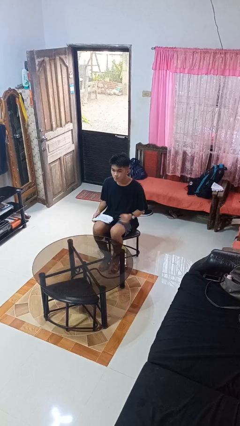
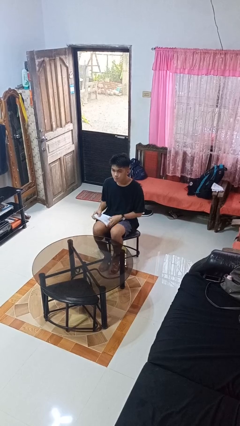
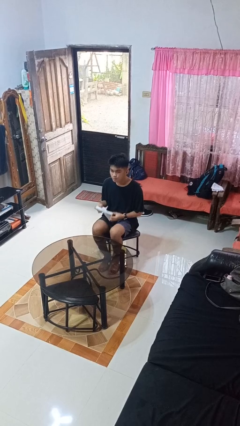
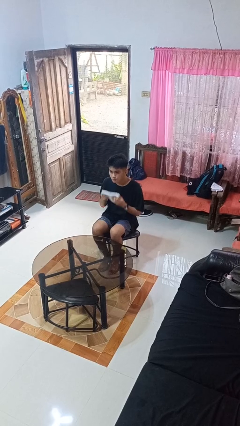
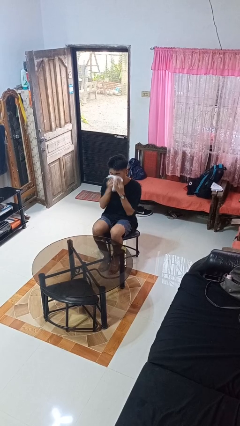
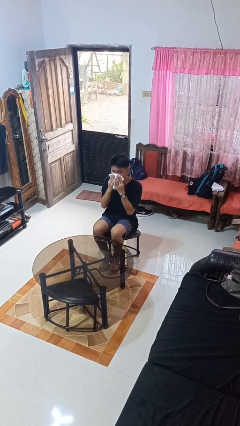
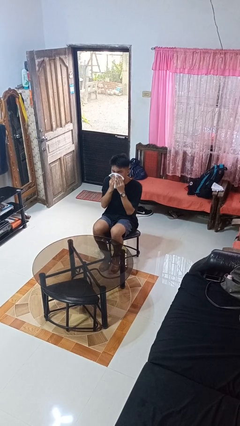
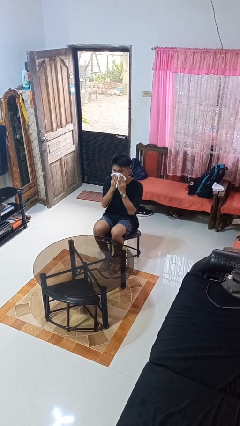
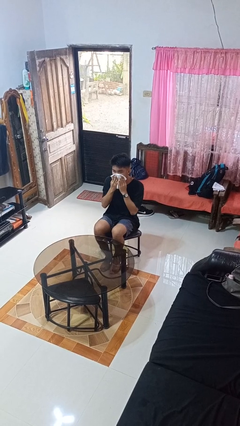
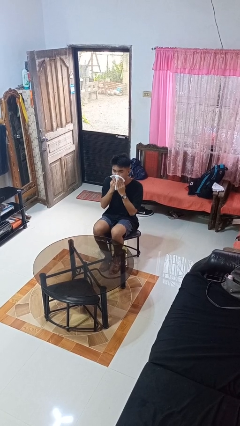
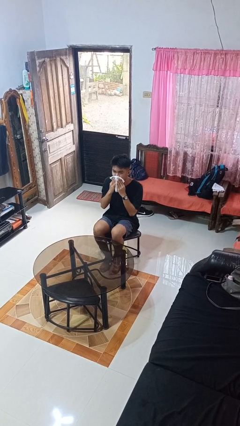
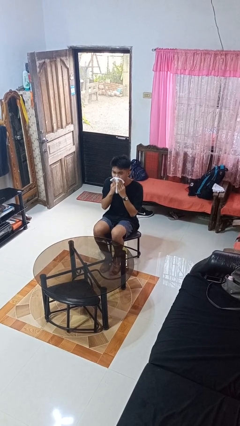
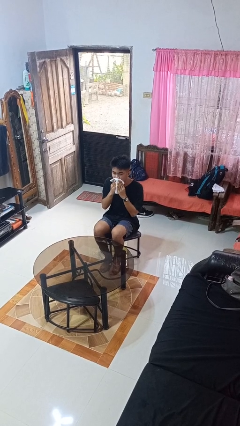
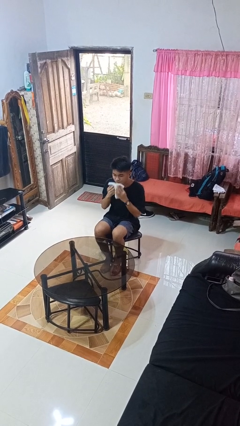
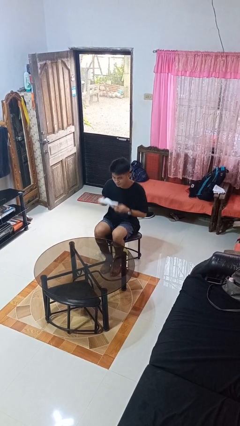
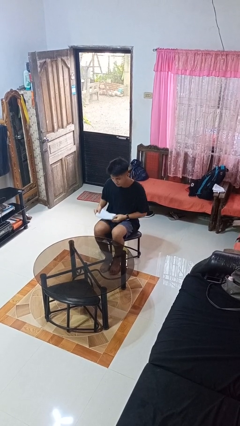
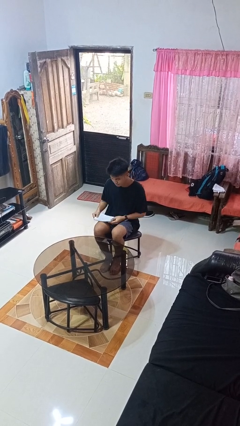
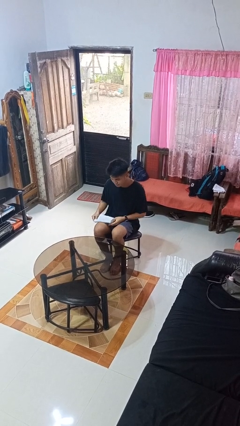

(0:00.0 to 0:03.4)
person wipes mouth with napkin

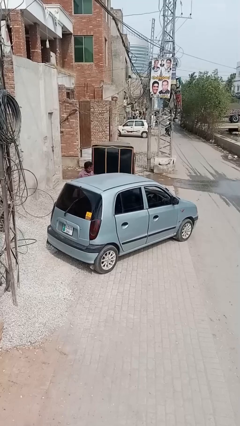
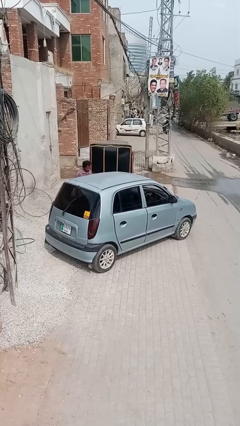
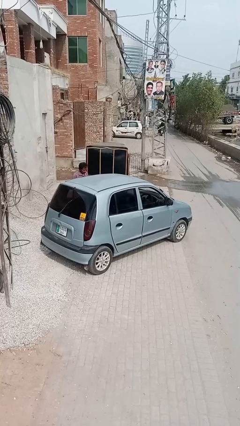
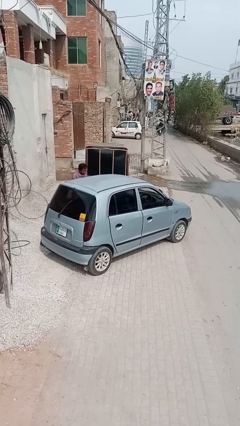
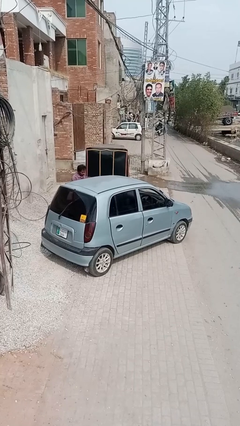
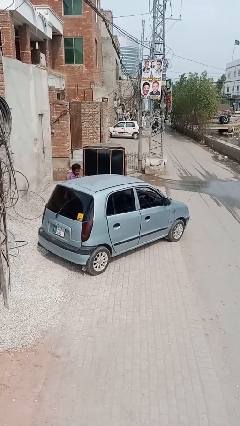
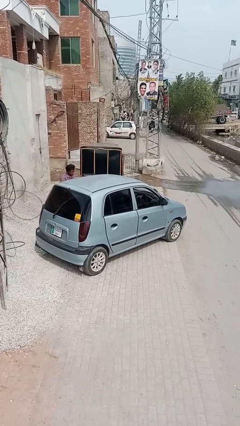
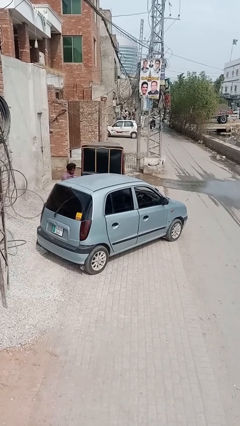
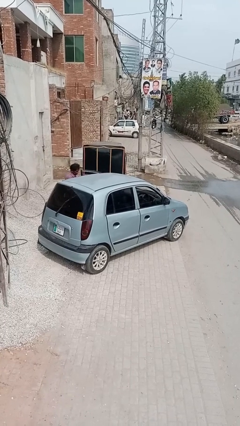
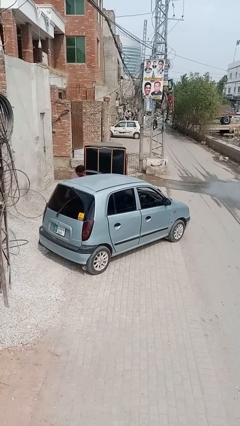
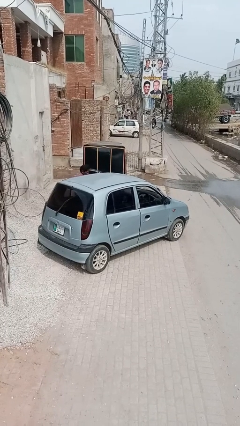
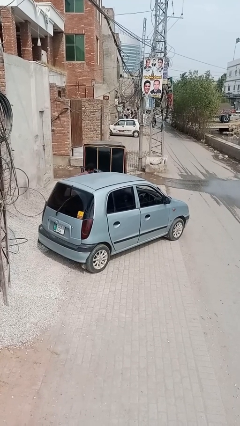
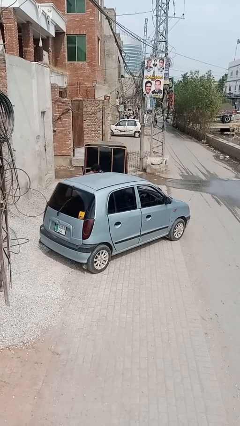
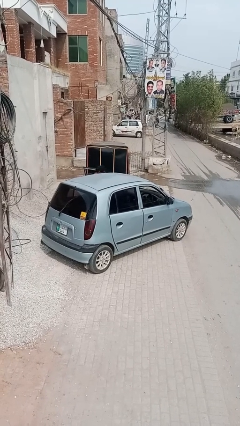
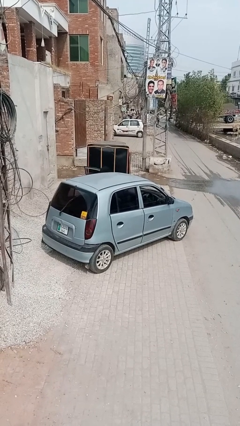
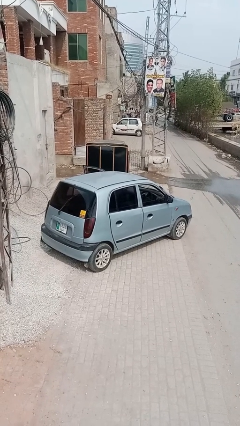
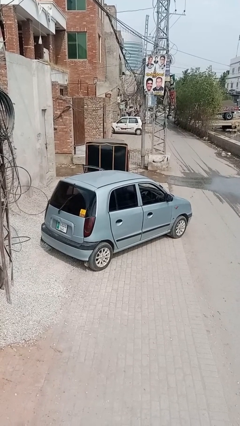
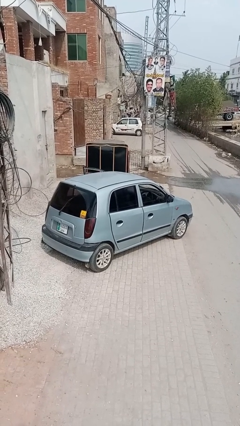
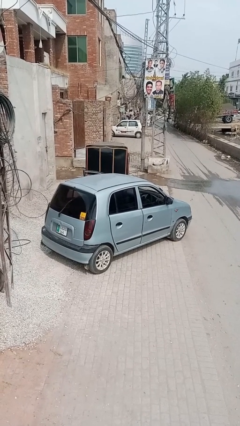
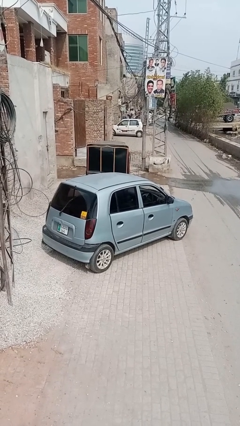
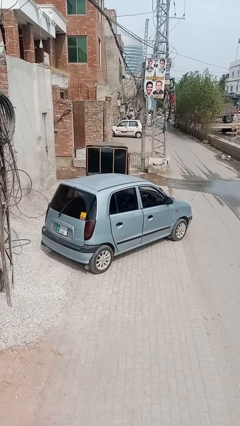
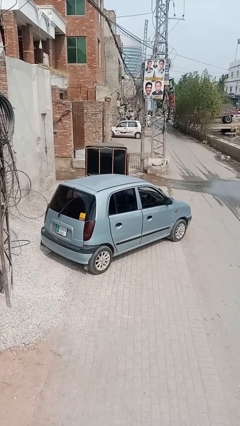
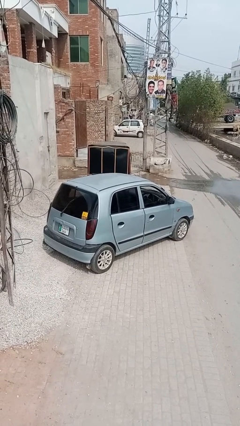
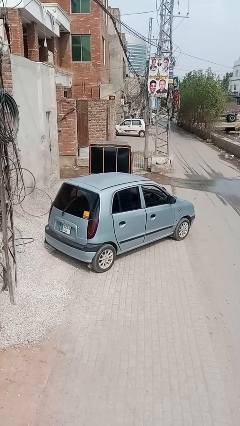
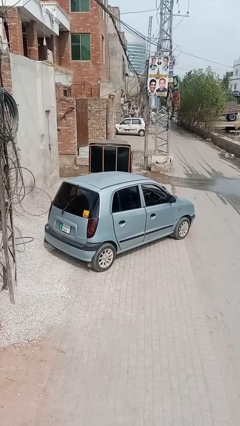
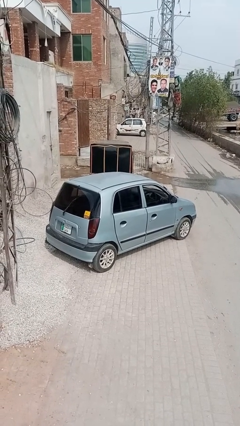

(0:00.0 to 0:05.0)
car picks up person

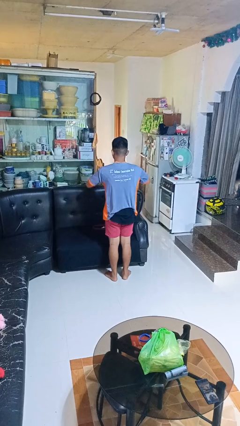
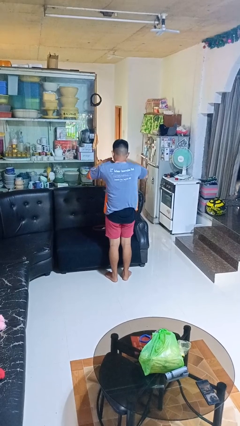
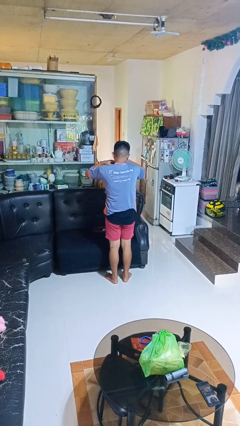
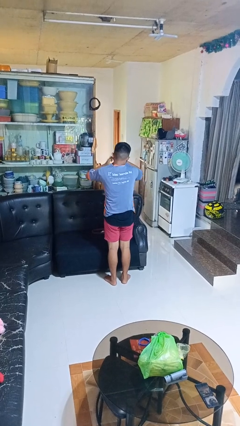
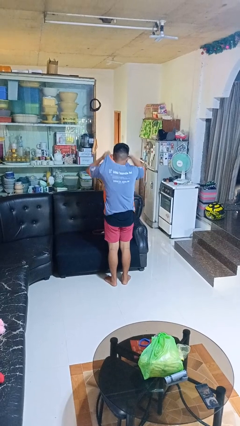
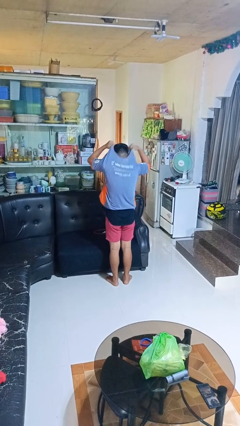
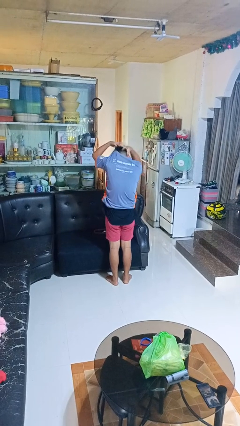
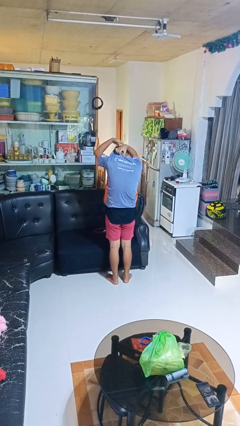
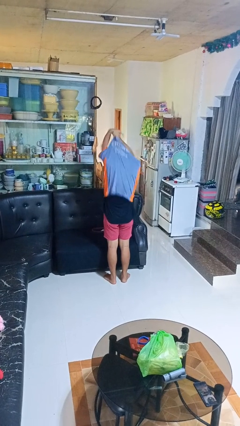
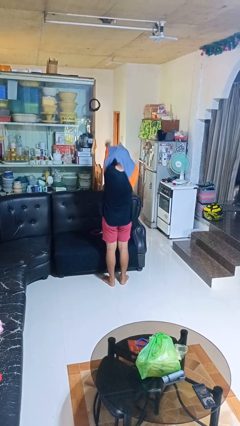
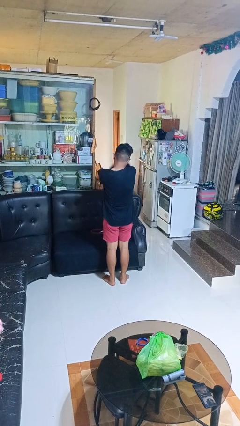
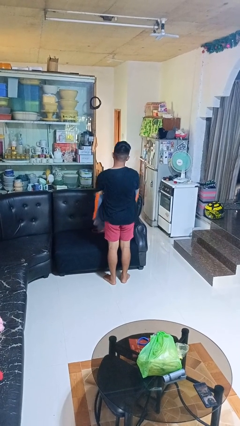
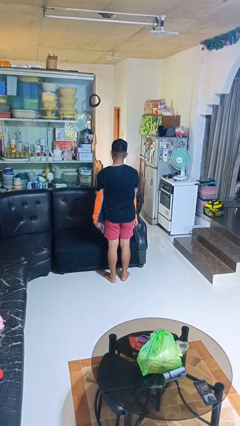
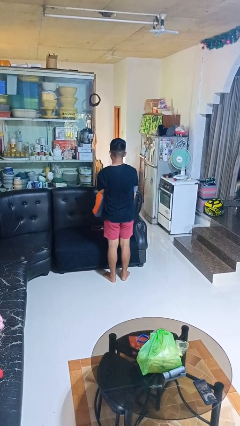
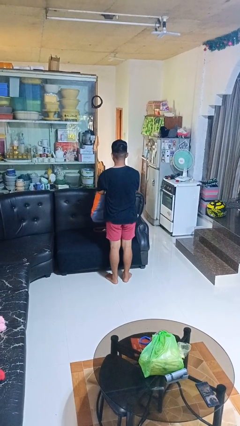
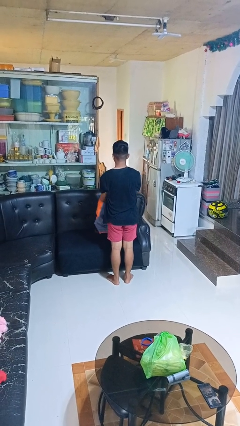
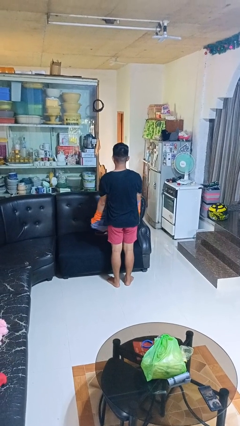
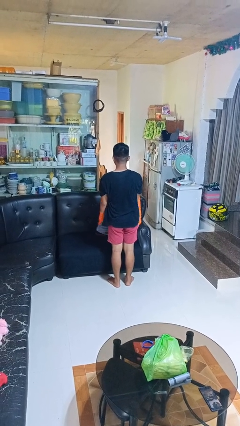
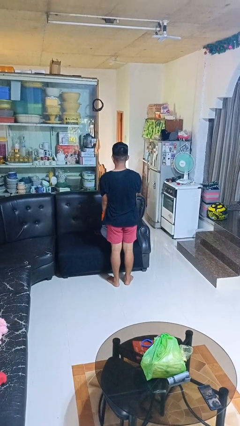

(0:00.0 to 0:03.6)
person takes off shirt

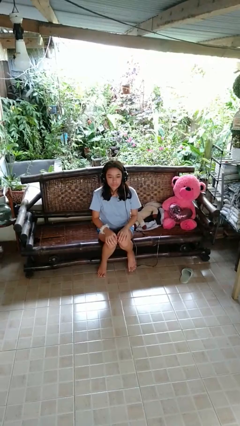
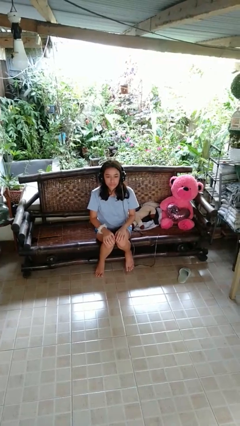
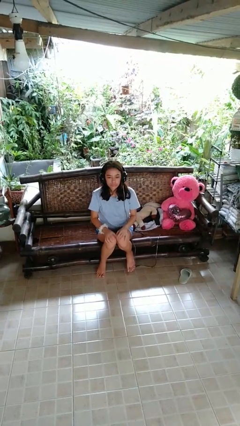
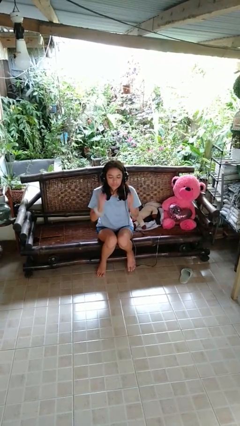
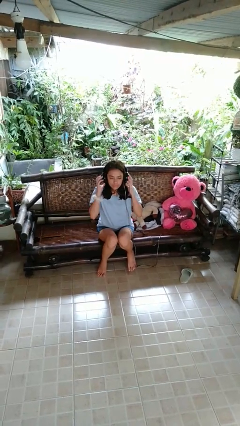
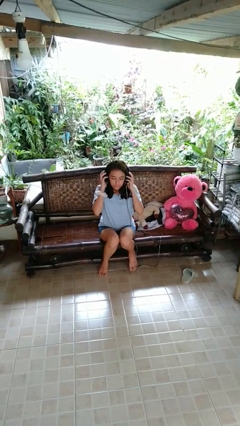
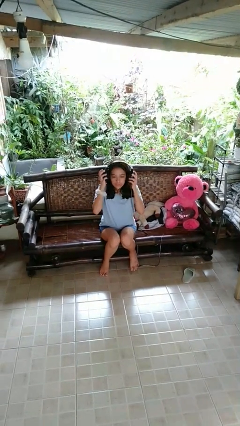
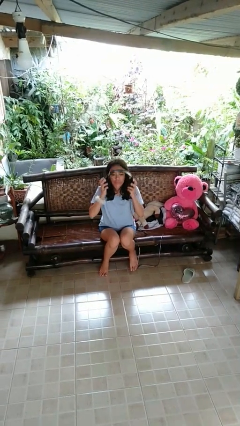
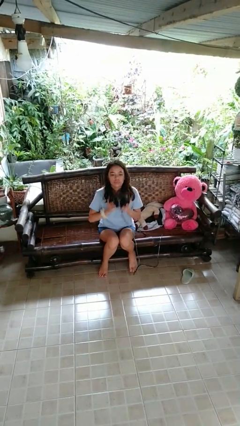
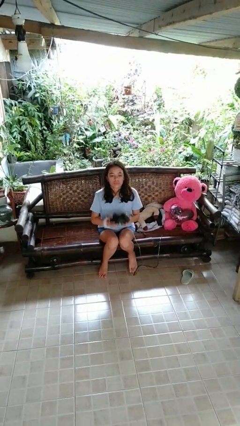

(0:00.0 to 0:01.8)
person takes off headphones

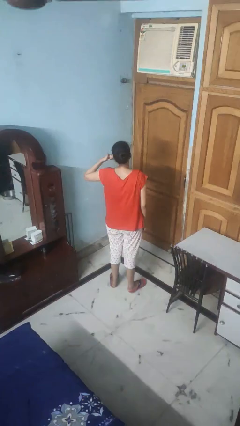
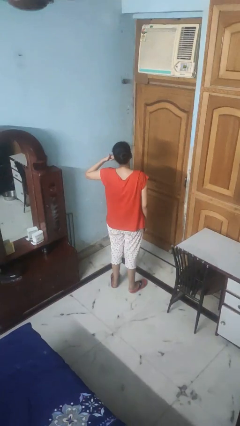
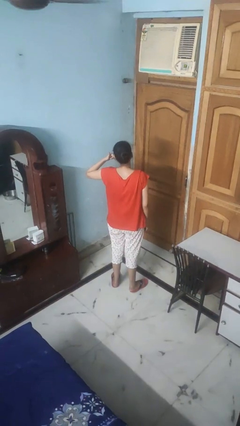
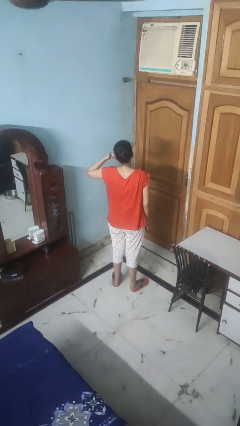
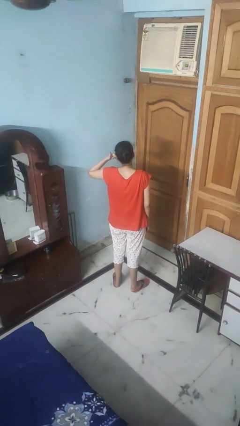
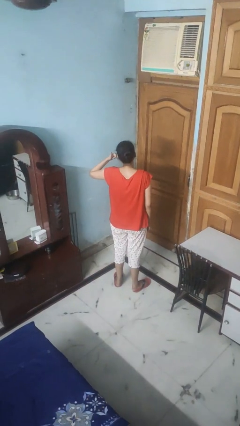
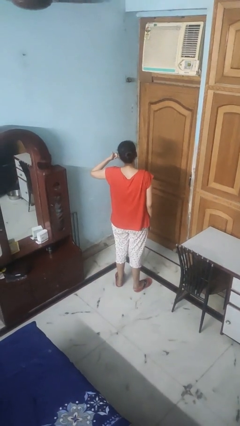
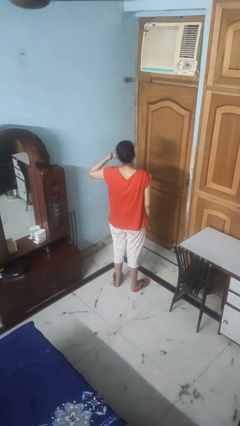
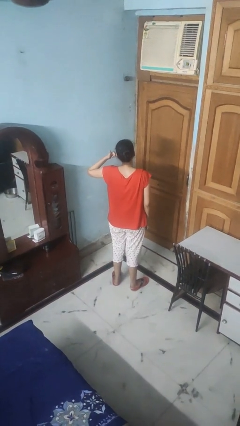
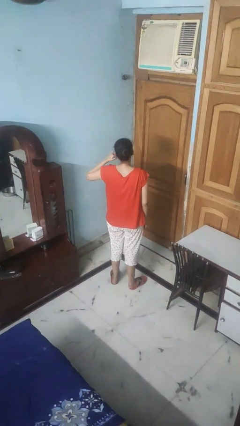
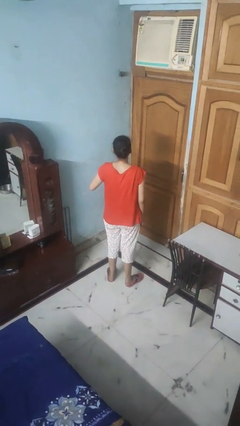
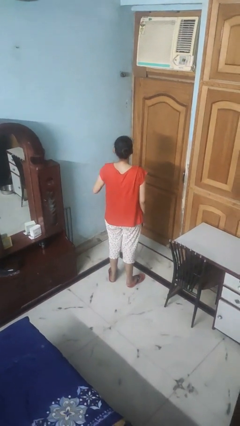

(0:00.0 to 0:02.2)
person gestures call me

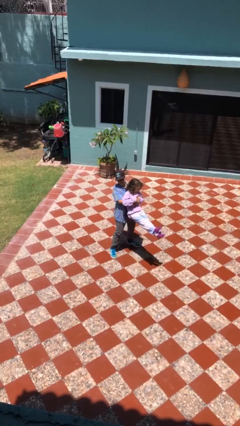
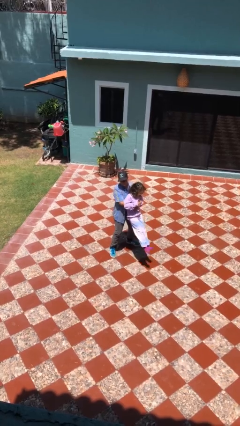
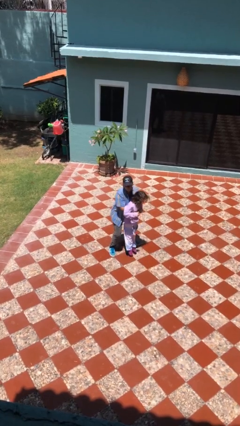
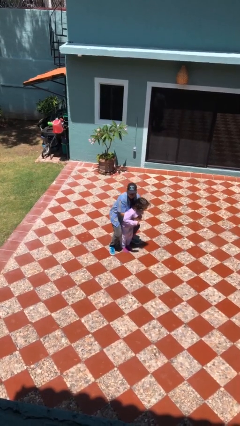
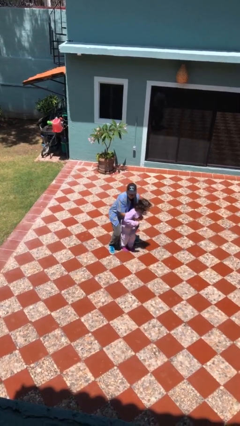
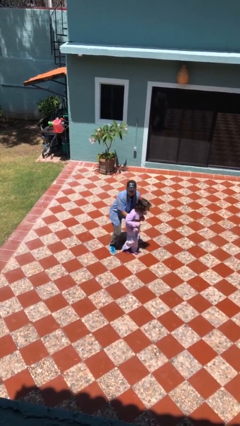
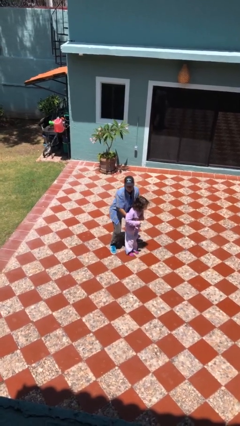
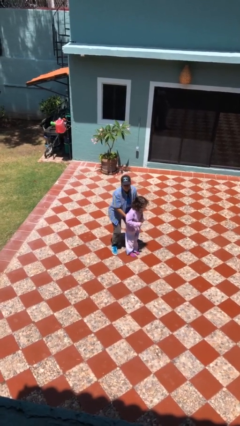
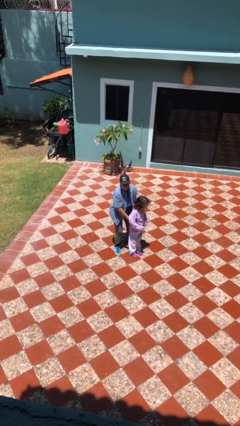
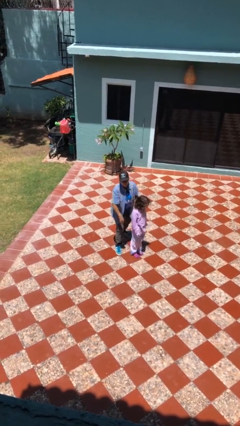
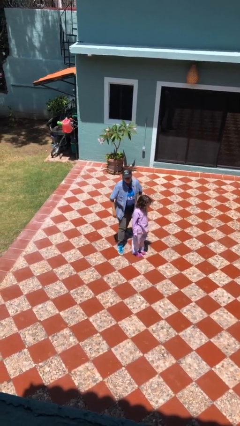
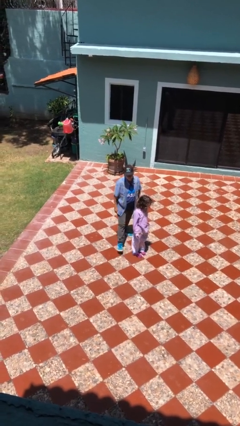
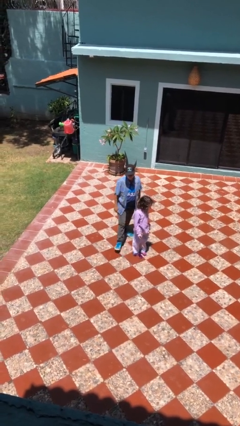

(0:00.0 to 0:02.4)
person puts down person
